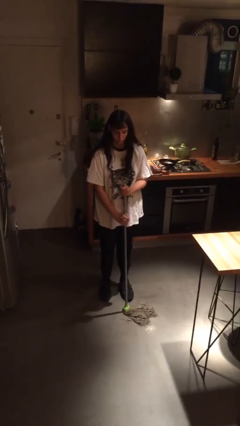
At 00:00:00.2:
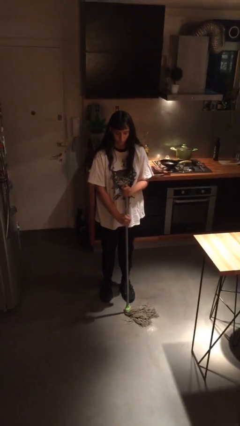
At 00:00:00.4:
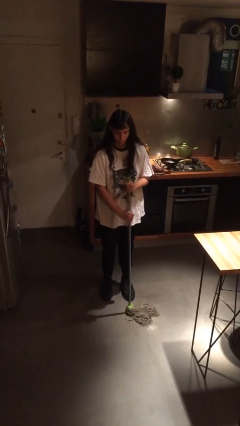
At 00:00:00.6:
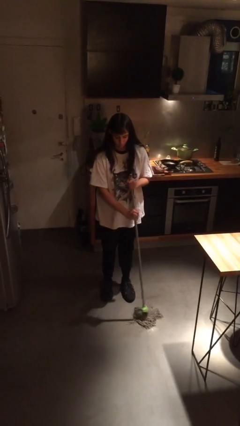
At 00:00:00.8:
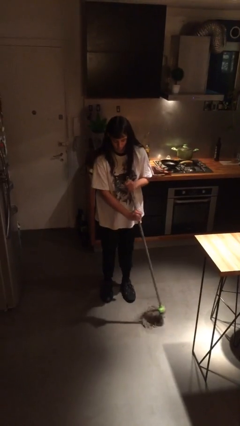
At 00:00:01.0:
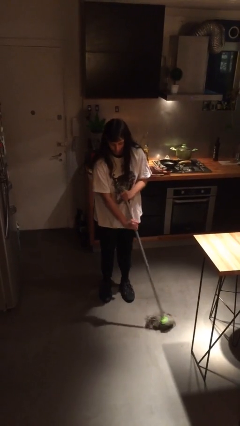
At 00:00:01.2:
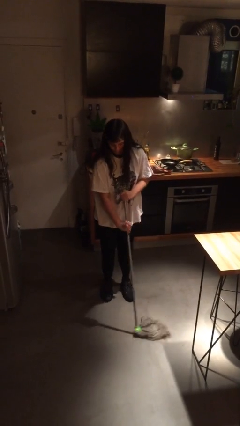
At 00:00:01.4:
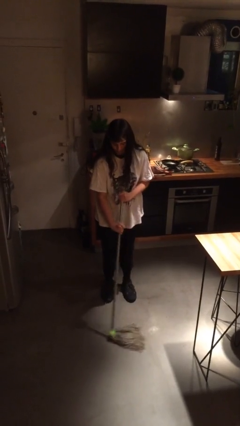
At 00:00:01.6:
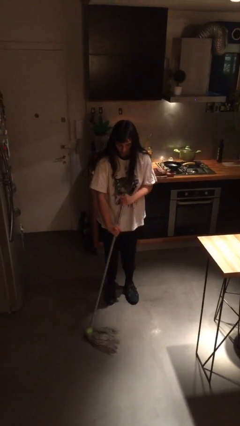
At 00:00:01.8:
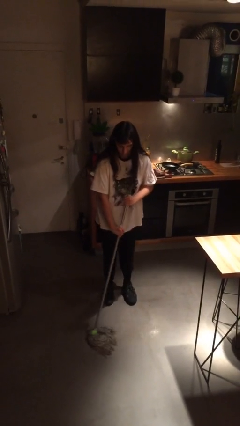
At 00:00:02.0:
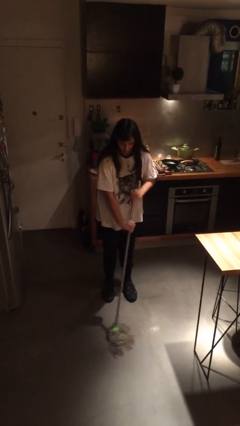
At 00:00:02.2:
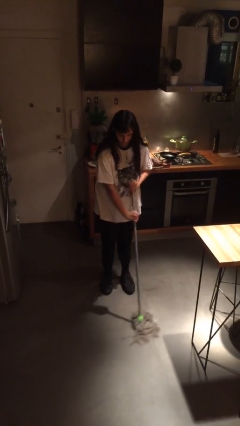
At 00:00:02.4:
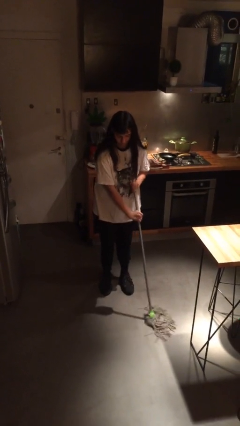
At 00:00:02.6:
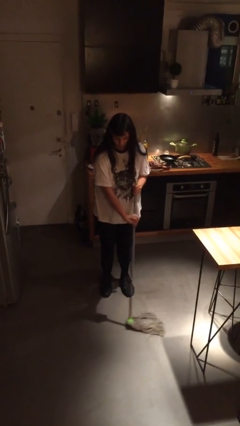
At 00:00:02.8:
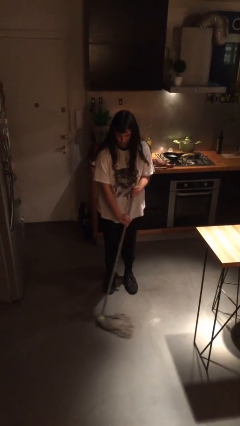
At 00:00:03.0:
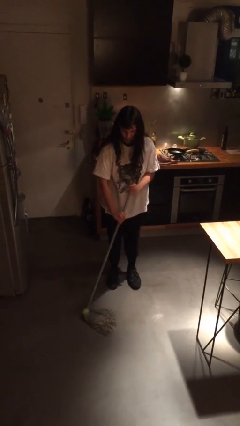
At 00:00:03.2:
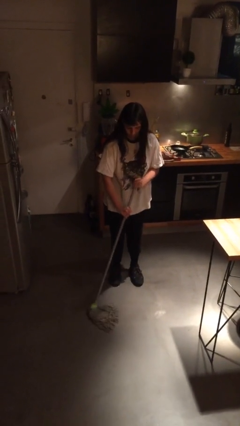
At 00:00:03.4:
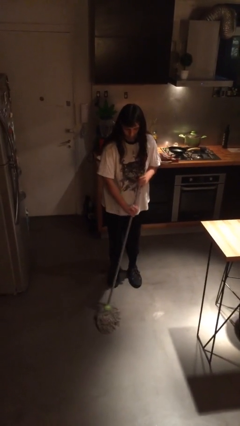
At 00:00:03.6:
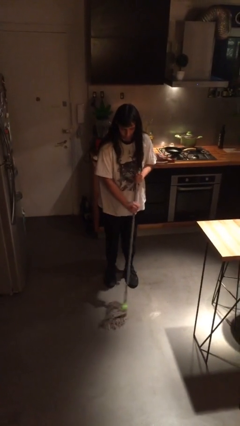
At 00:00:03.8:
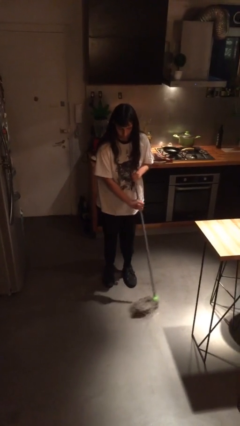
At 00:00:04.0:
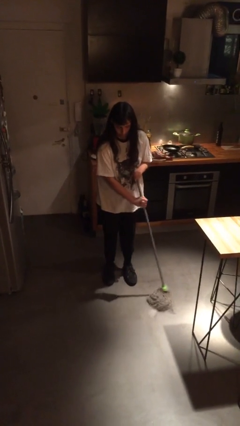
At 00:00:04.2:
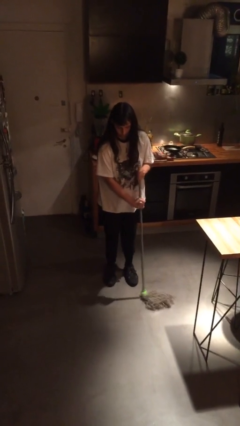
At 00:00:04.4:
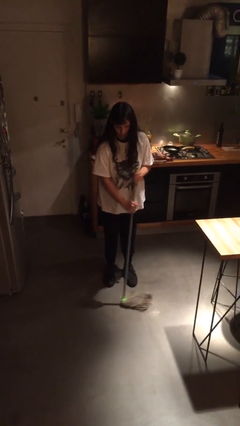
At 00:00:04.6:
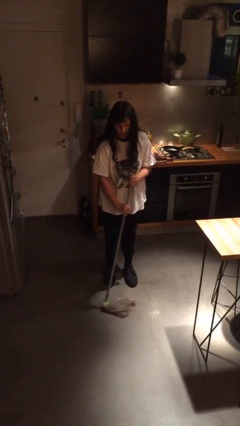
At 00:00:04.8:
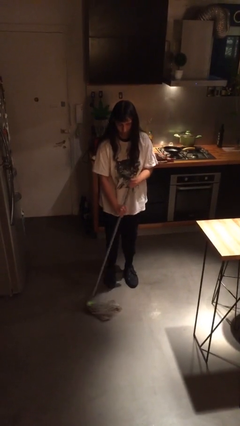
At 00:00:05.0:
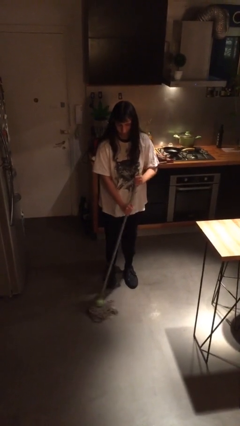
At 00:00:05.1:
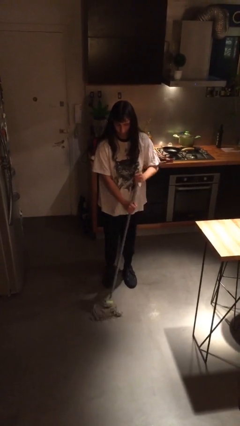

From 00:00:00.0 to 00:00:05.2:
person mops

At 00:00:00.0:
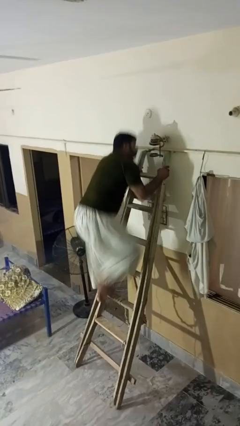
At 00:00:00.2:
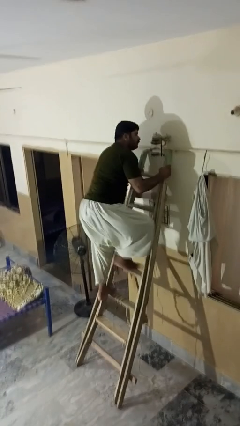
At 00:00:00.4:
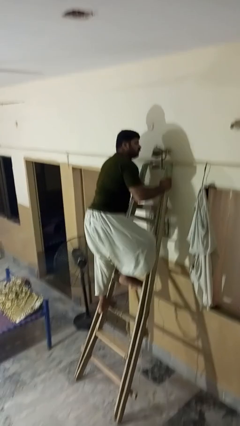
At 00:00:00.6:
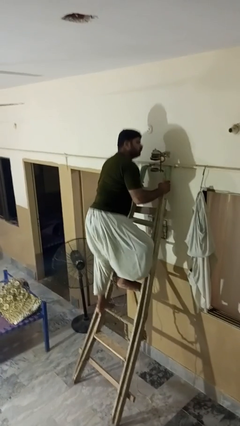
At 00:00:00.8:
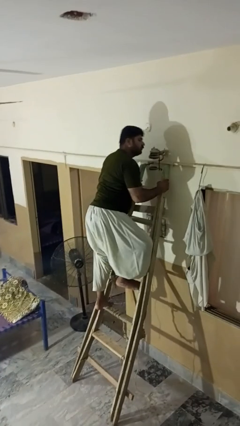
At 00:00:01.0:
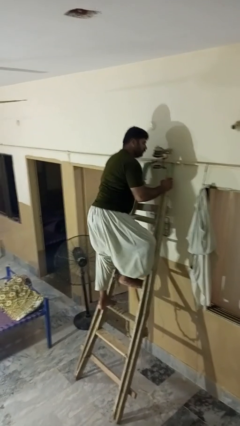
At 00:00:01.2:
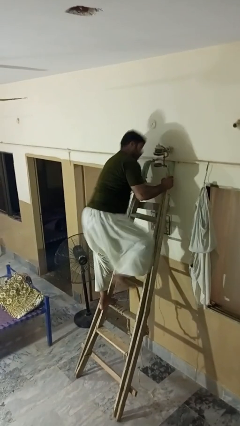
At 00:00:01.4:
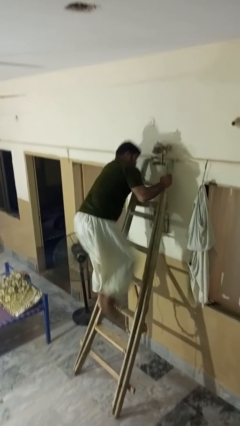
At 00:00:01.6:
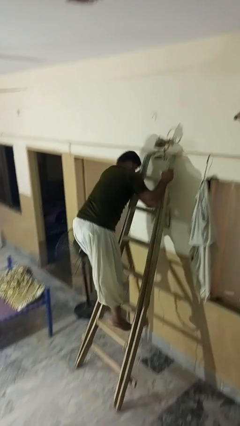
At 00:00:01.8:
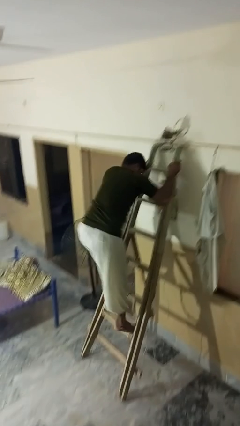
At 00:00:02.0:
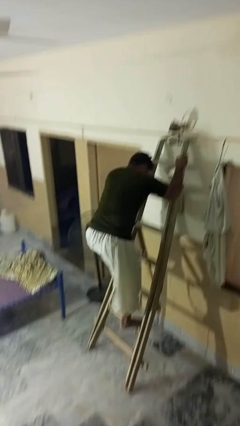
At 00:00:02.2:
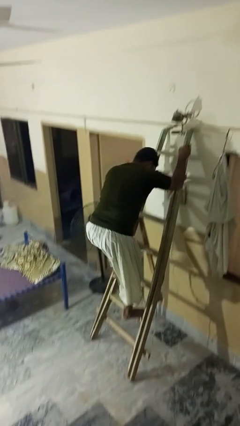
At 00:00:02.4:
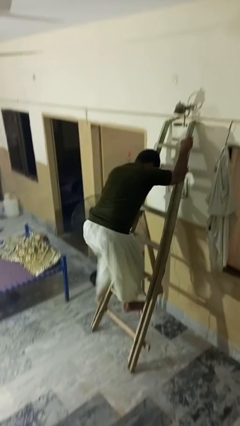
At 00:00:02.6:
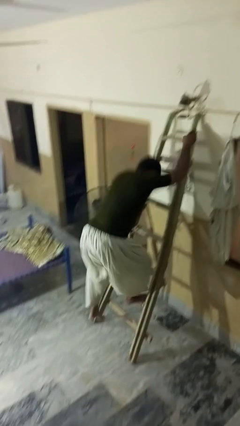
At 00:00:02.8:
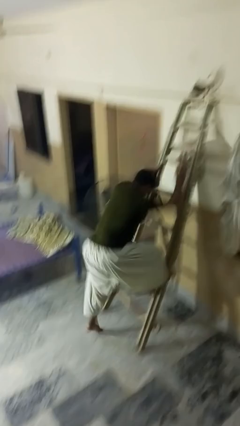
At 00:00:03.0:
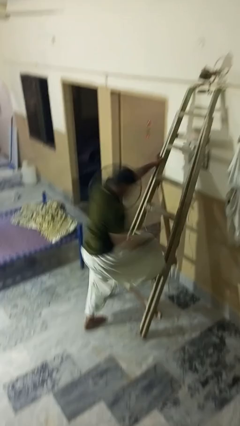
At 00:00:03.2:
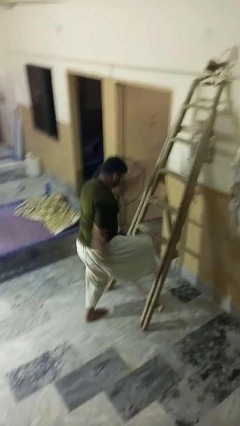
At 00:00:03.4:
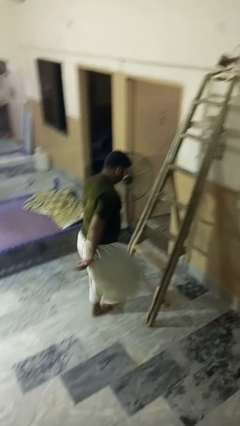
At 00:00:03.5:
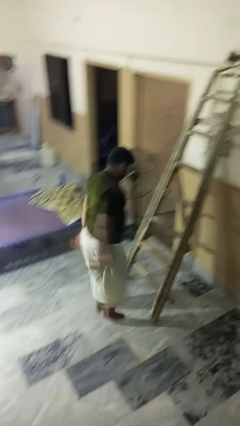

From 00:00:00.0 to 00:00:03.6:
person climbs down ladder

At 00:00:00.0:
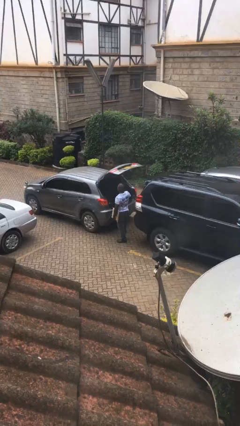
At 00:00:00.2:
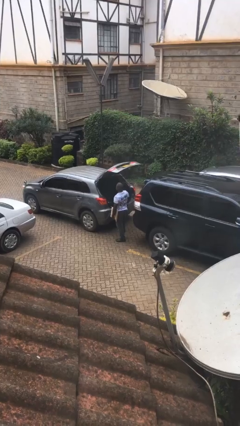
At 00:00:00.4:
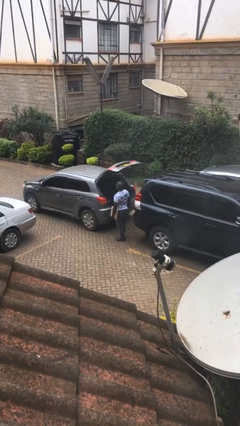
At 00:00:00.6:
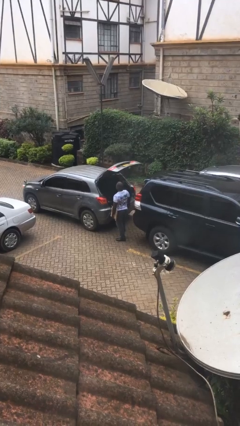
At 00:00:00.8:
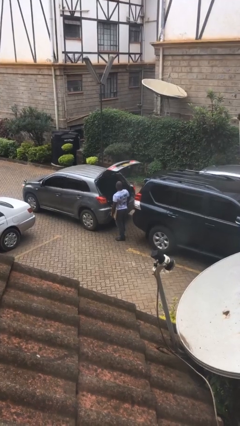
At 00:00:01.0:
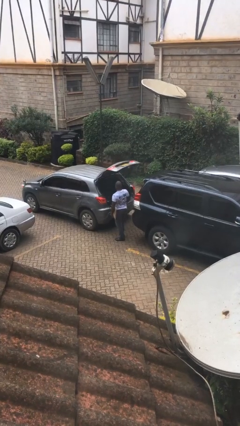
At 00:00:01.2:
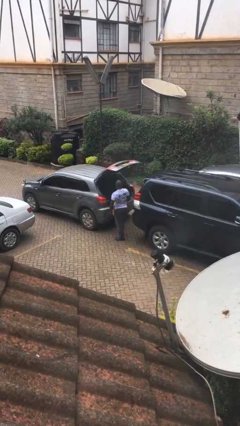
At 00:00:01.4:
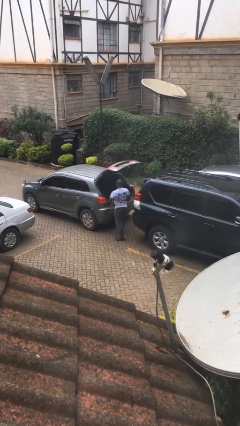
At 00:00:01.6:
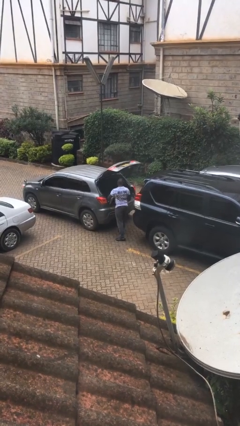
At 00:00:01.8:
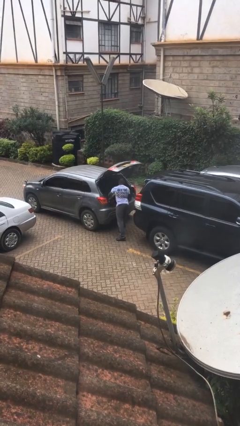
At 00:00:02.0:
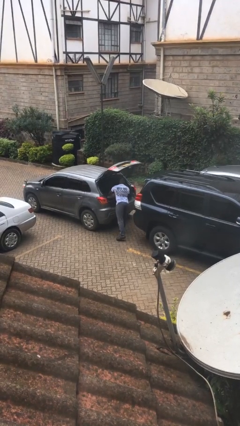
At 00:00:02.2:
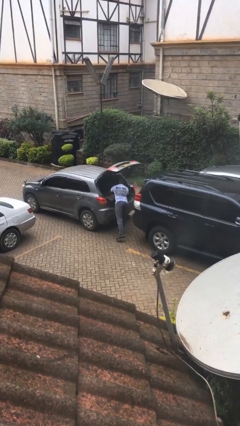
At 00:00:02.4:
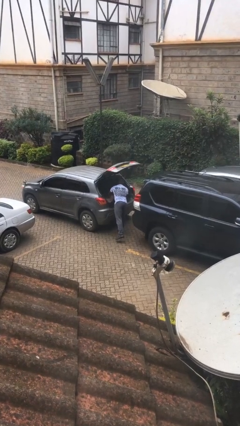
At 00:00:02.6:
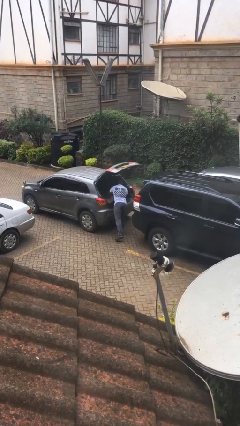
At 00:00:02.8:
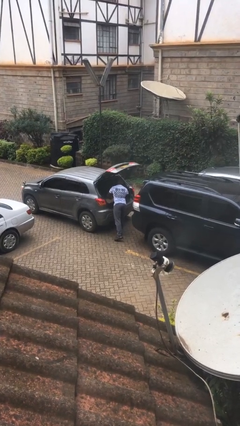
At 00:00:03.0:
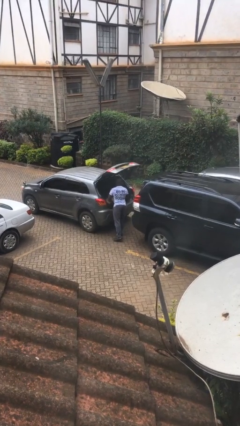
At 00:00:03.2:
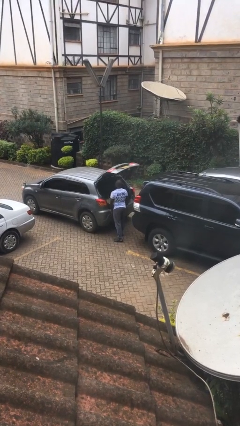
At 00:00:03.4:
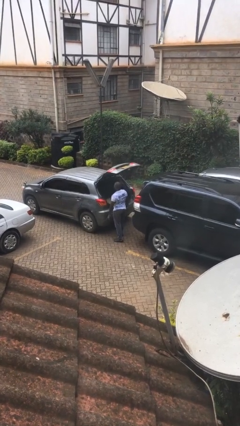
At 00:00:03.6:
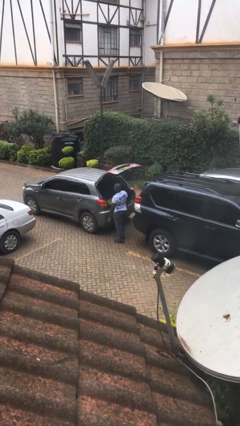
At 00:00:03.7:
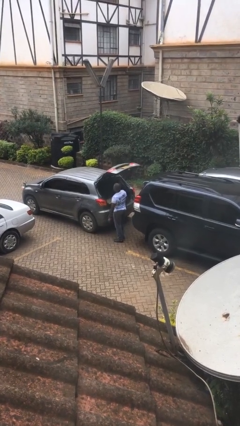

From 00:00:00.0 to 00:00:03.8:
person loads car

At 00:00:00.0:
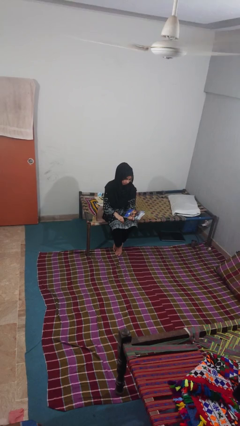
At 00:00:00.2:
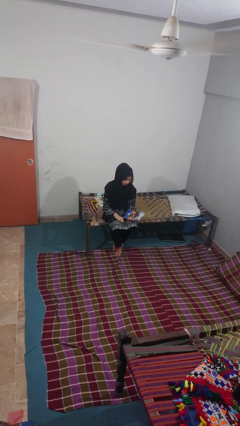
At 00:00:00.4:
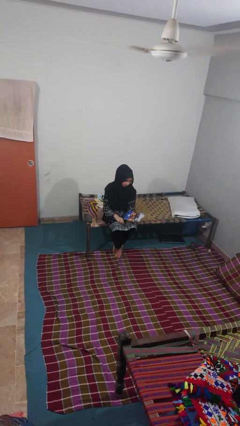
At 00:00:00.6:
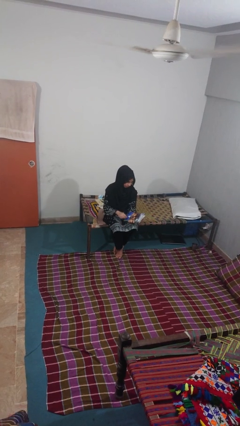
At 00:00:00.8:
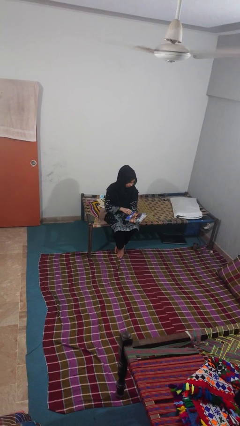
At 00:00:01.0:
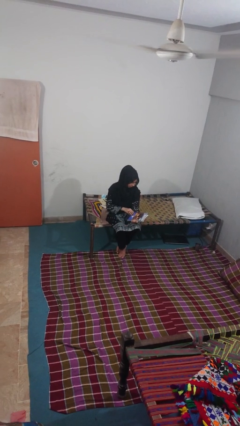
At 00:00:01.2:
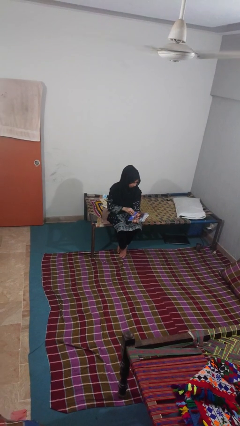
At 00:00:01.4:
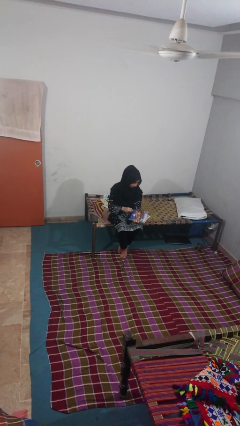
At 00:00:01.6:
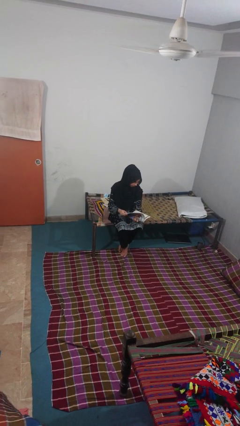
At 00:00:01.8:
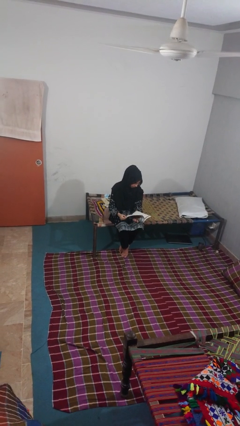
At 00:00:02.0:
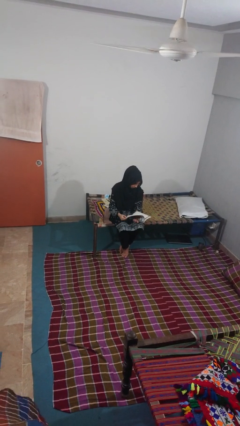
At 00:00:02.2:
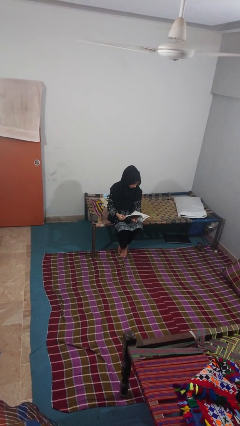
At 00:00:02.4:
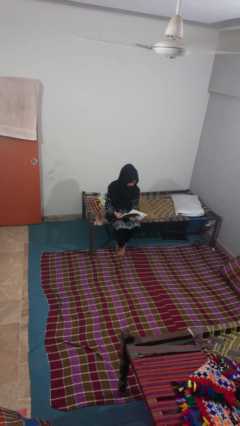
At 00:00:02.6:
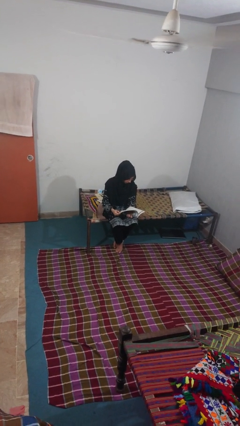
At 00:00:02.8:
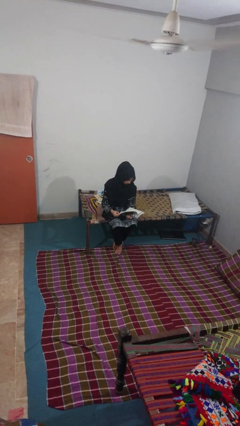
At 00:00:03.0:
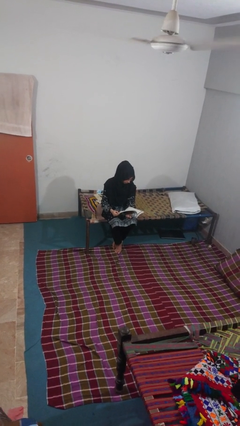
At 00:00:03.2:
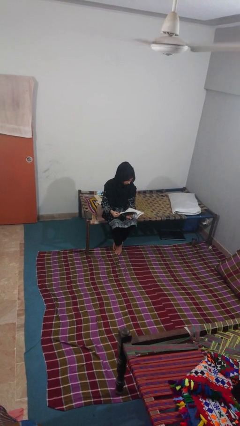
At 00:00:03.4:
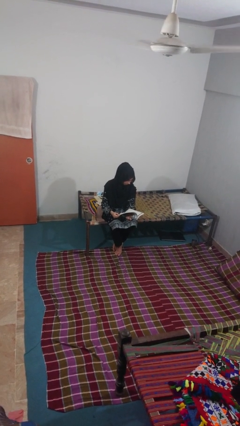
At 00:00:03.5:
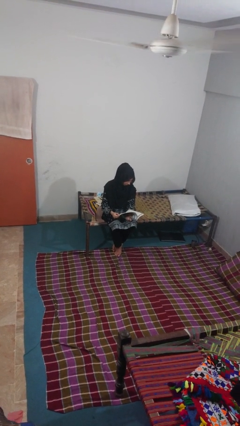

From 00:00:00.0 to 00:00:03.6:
person reads book

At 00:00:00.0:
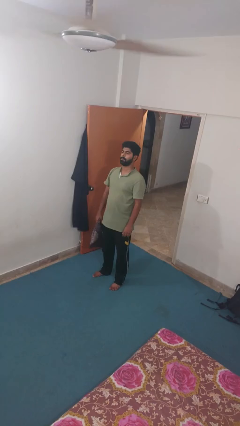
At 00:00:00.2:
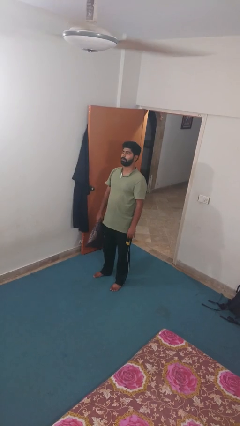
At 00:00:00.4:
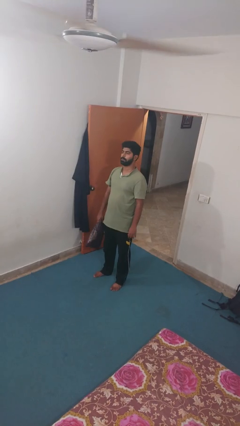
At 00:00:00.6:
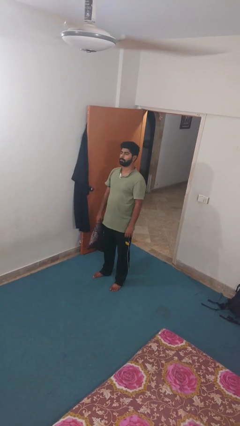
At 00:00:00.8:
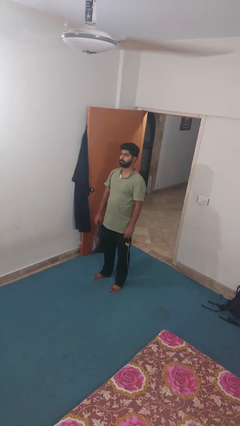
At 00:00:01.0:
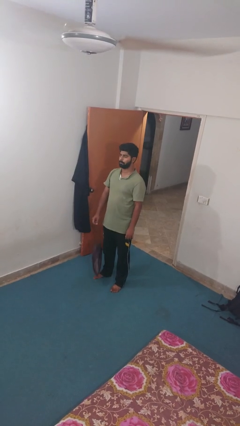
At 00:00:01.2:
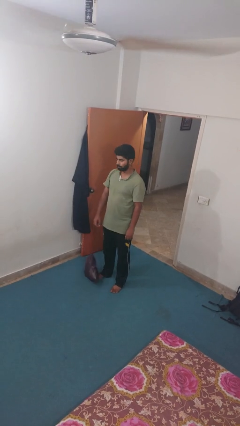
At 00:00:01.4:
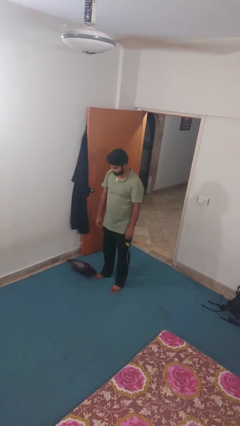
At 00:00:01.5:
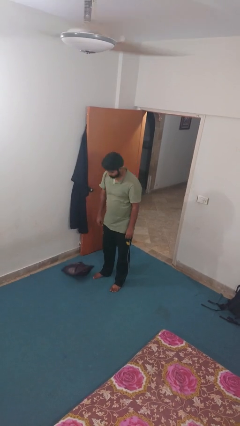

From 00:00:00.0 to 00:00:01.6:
person drops object
